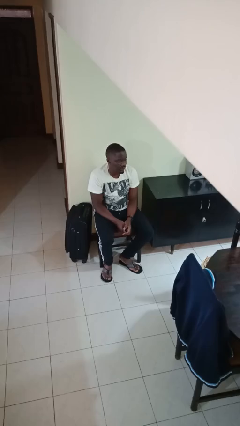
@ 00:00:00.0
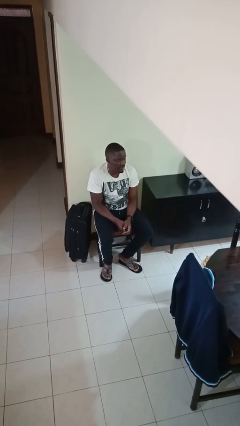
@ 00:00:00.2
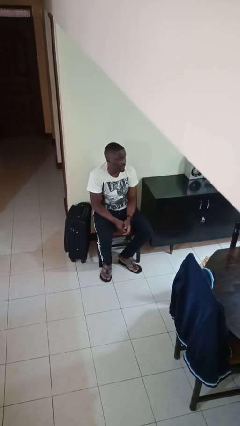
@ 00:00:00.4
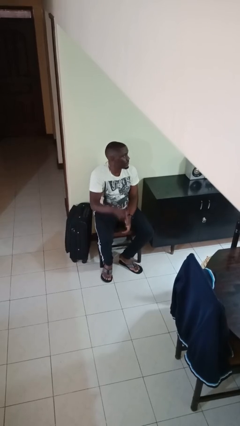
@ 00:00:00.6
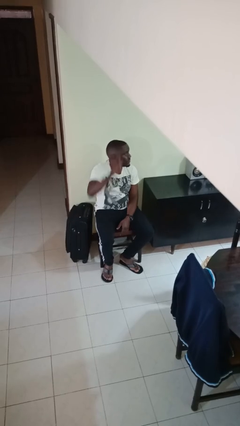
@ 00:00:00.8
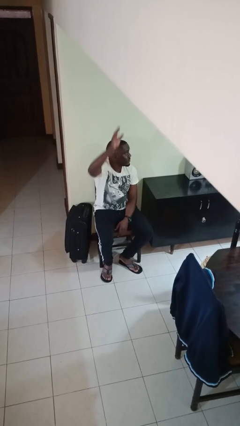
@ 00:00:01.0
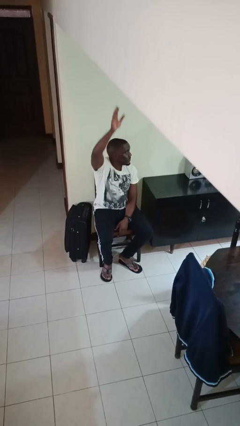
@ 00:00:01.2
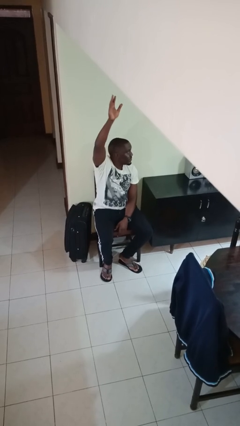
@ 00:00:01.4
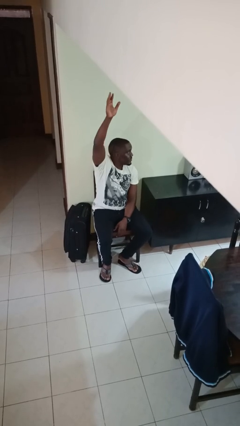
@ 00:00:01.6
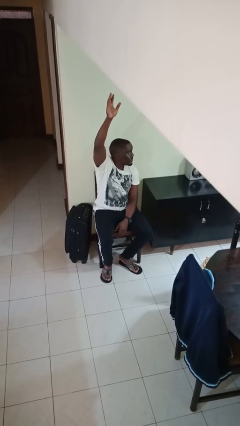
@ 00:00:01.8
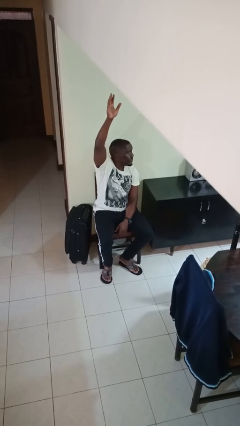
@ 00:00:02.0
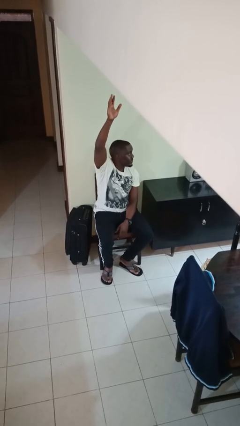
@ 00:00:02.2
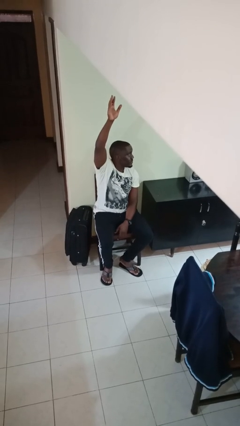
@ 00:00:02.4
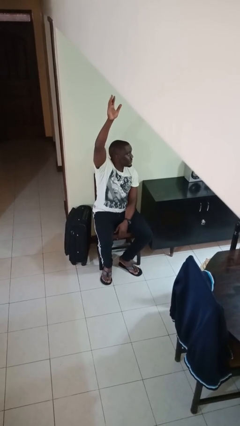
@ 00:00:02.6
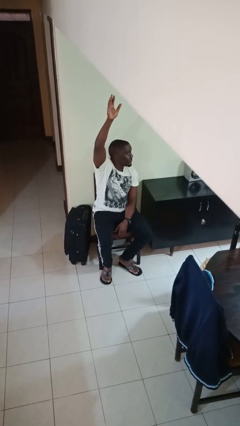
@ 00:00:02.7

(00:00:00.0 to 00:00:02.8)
person gestures raise hand

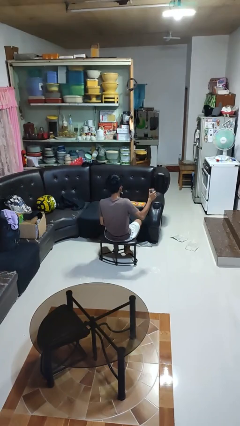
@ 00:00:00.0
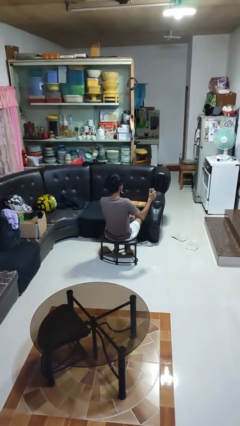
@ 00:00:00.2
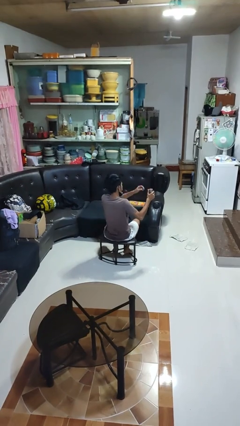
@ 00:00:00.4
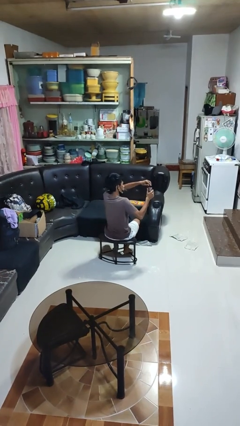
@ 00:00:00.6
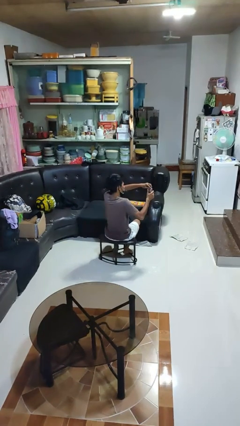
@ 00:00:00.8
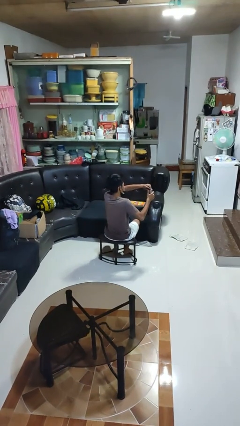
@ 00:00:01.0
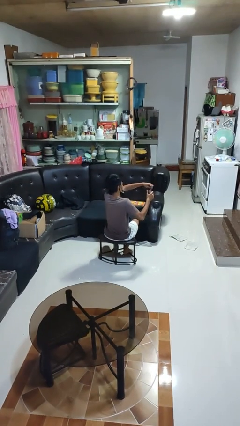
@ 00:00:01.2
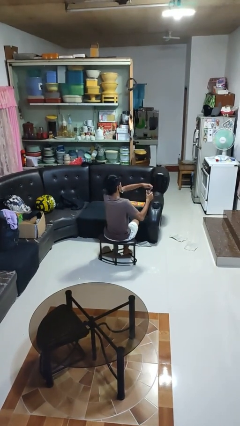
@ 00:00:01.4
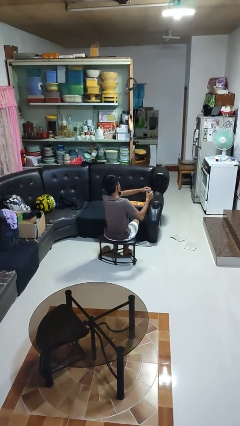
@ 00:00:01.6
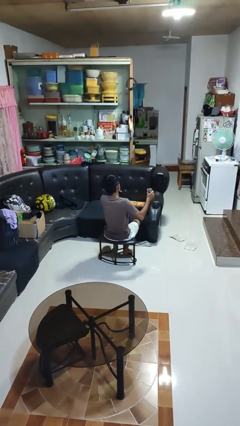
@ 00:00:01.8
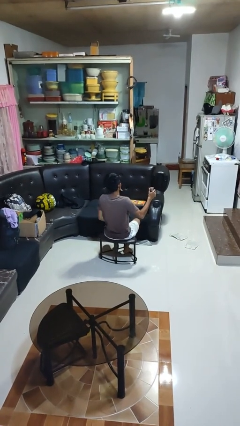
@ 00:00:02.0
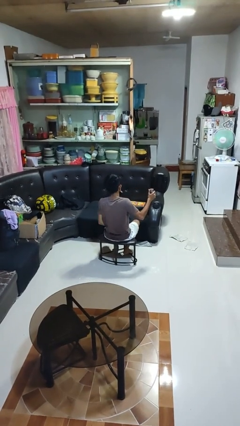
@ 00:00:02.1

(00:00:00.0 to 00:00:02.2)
person opens beverage can

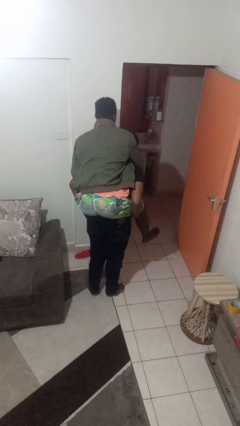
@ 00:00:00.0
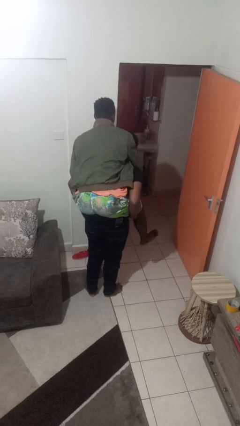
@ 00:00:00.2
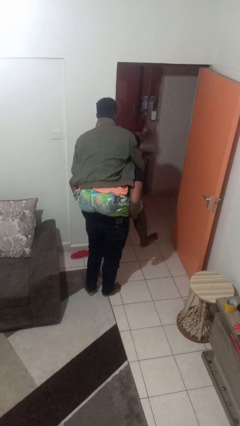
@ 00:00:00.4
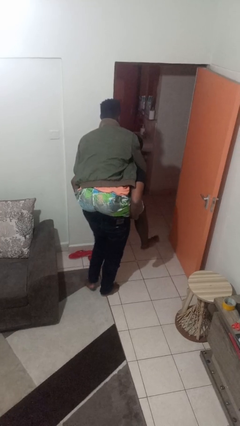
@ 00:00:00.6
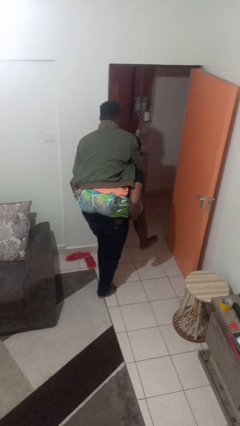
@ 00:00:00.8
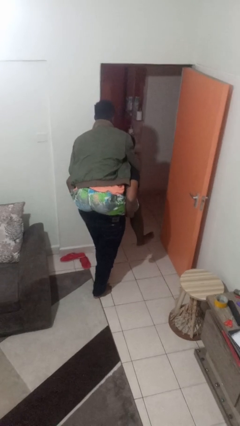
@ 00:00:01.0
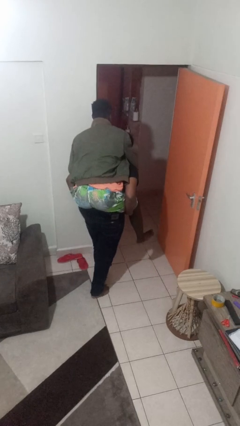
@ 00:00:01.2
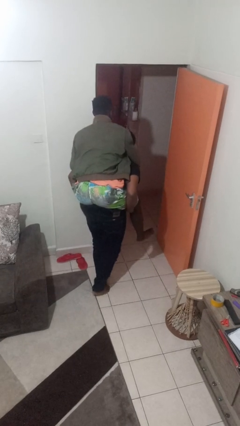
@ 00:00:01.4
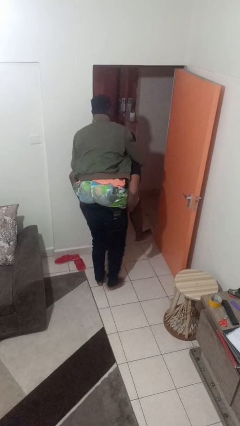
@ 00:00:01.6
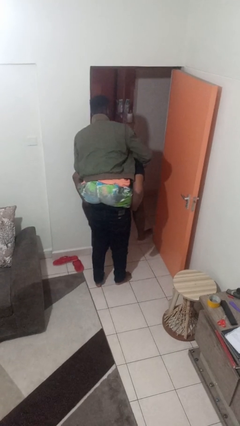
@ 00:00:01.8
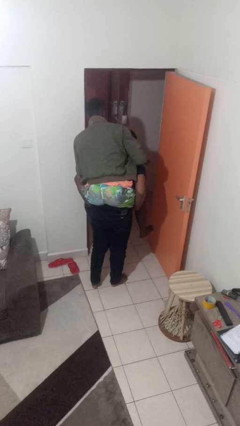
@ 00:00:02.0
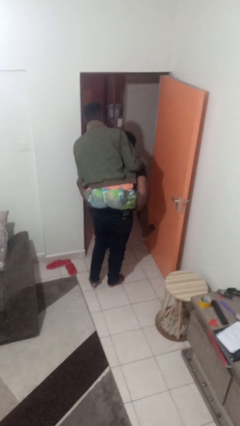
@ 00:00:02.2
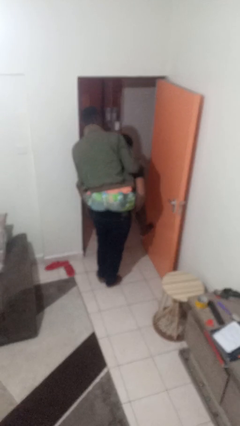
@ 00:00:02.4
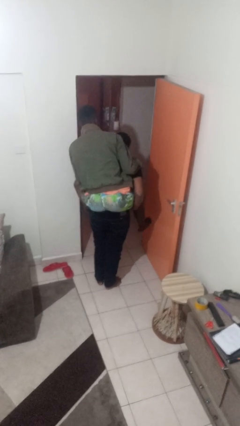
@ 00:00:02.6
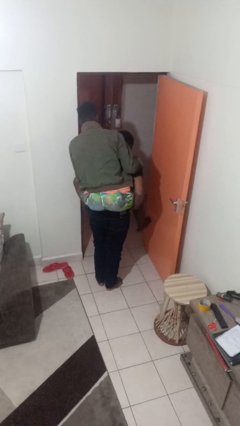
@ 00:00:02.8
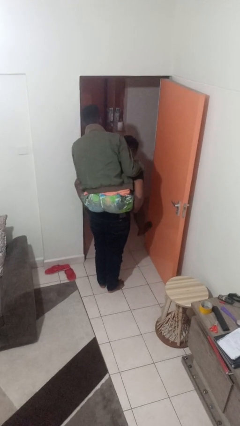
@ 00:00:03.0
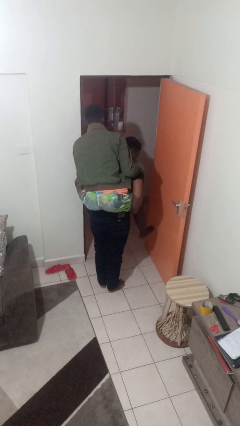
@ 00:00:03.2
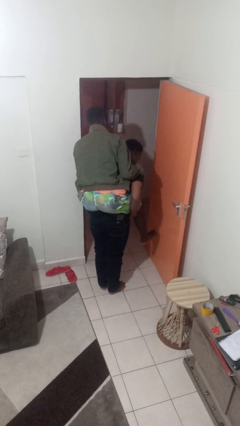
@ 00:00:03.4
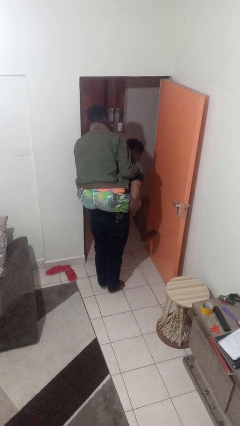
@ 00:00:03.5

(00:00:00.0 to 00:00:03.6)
person carries person on back

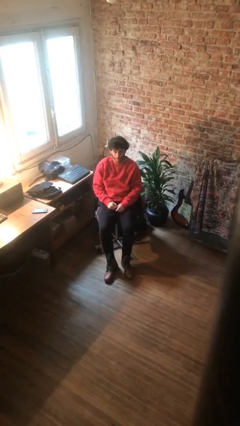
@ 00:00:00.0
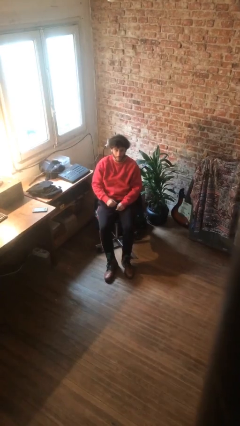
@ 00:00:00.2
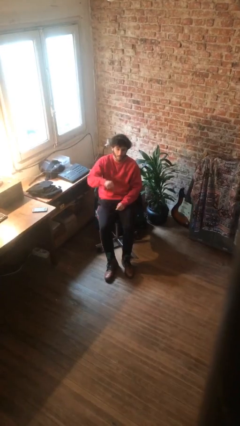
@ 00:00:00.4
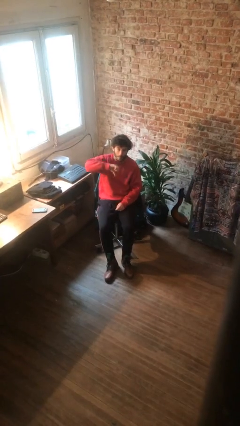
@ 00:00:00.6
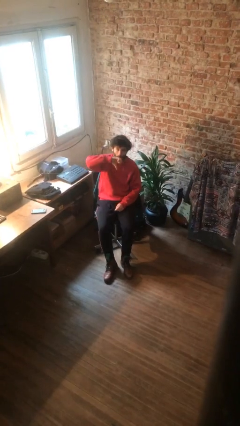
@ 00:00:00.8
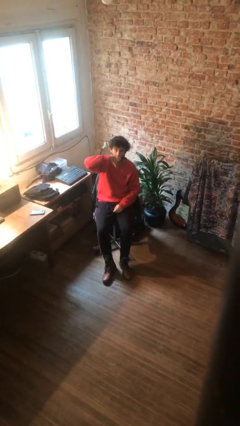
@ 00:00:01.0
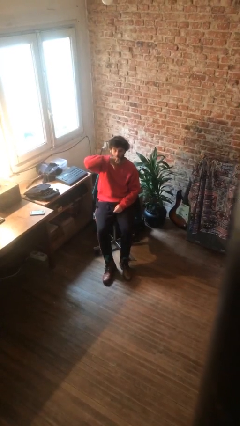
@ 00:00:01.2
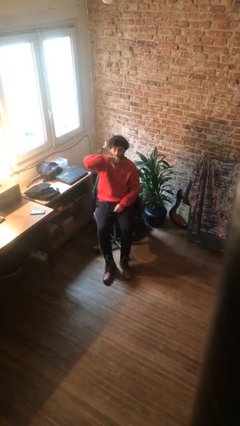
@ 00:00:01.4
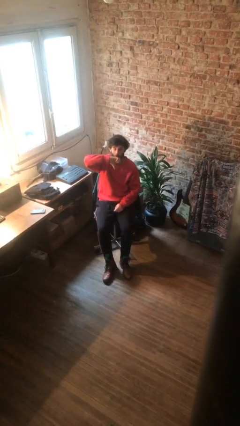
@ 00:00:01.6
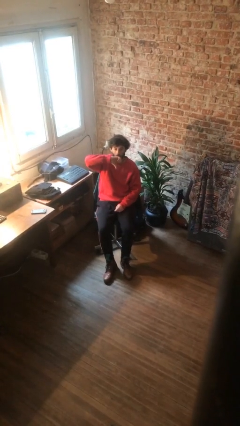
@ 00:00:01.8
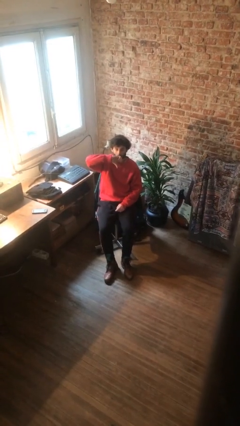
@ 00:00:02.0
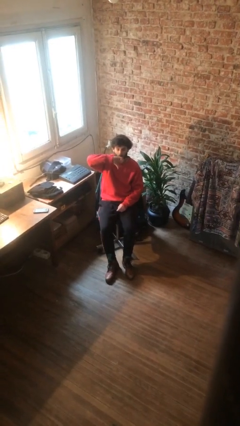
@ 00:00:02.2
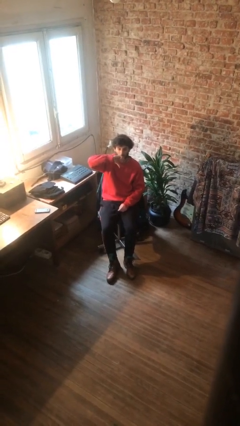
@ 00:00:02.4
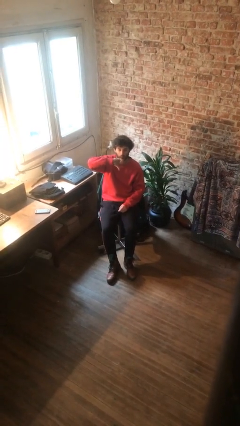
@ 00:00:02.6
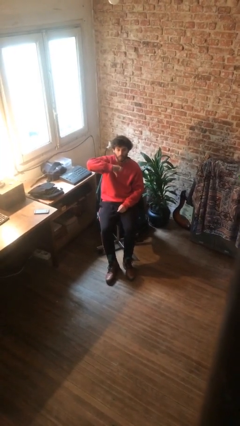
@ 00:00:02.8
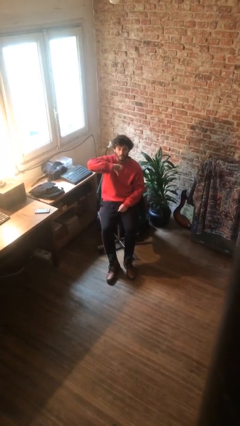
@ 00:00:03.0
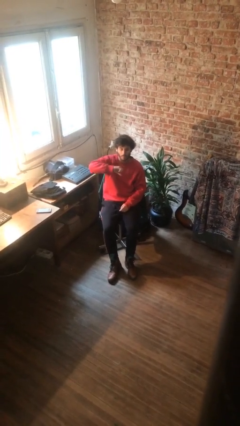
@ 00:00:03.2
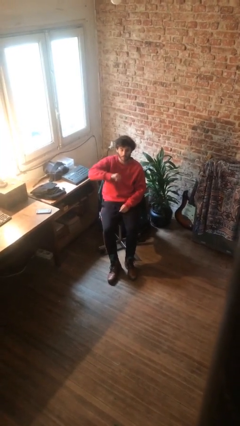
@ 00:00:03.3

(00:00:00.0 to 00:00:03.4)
person gestures thumbs down

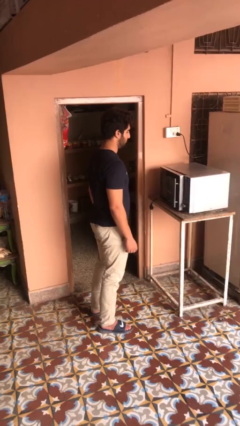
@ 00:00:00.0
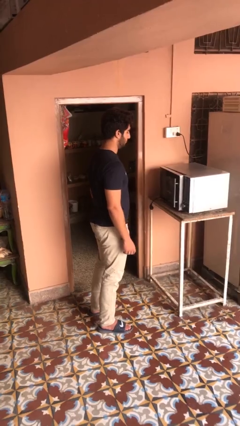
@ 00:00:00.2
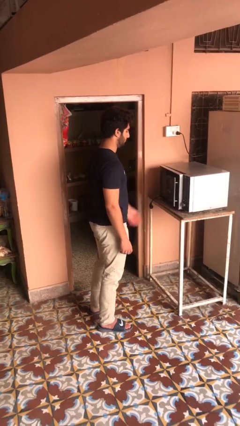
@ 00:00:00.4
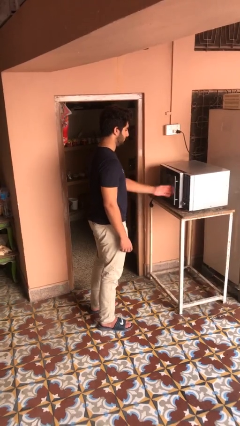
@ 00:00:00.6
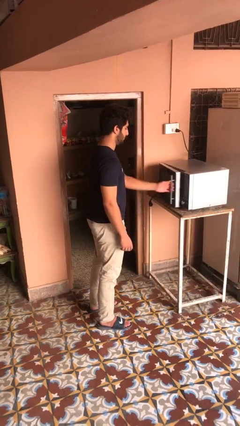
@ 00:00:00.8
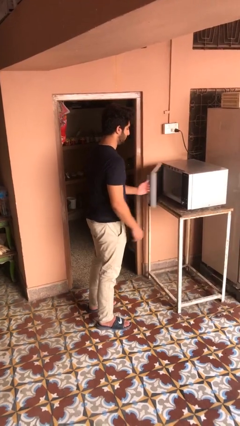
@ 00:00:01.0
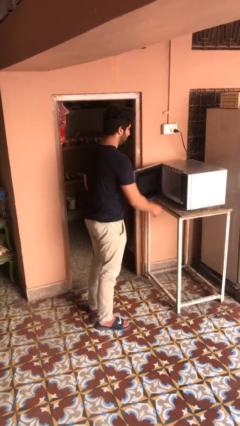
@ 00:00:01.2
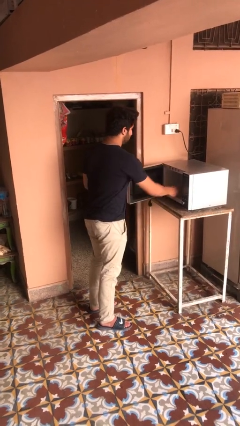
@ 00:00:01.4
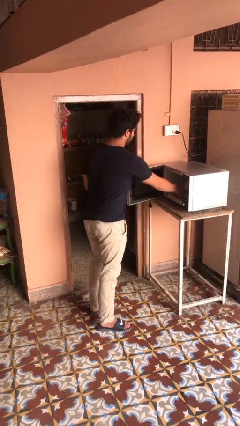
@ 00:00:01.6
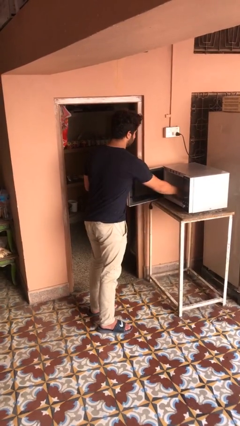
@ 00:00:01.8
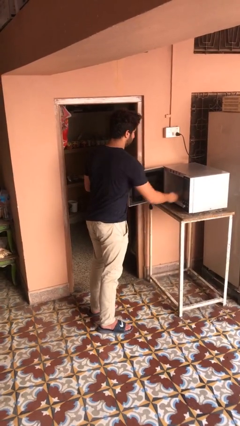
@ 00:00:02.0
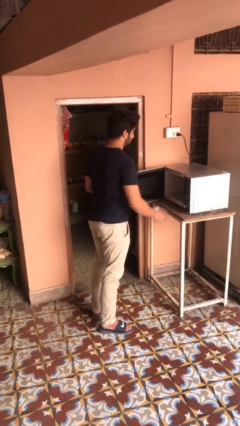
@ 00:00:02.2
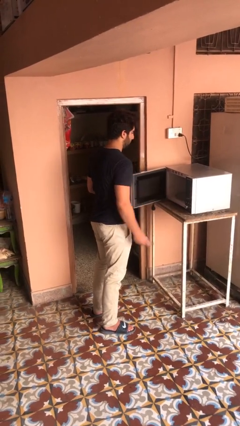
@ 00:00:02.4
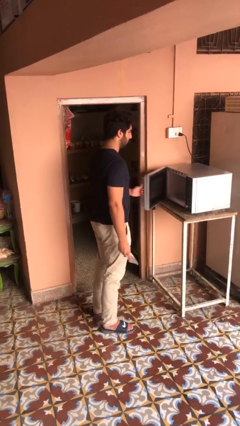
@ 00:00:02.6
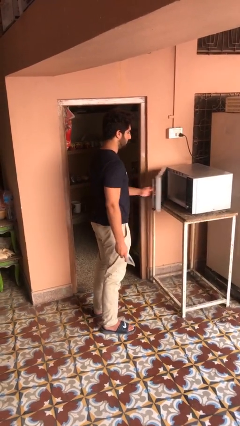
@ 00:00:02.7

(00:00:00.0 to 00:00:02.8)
person takes object from microwave

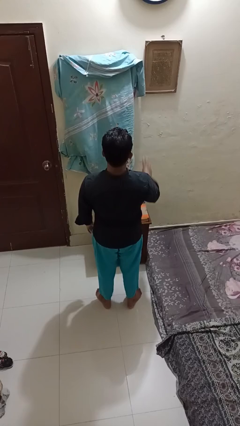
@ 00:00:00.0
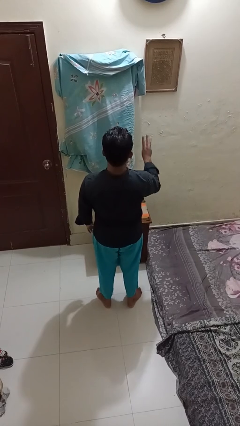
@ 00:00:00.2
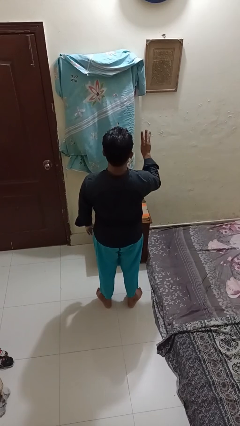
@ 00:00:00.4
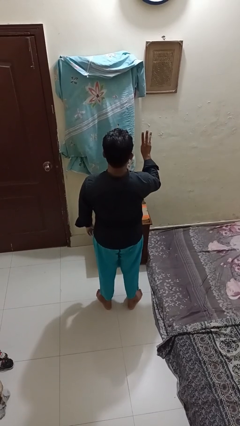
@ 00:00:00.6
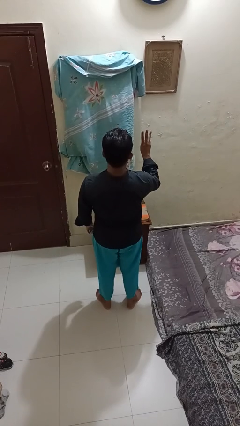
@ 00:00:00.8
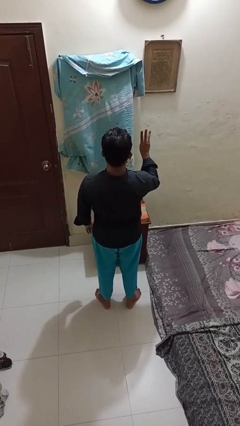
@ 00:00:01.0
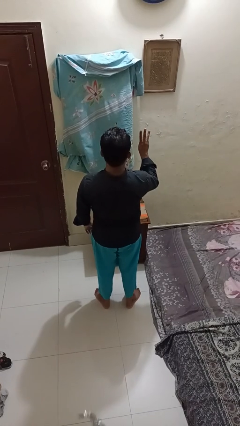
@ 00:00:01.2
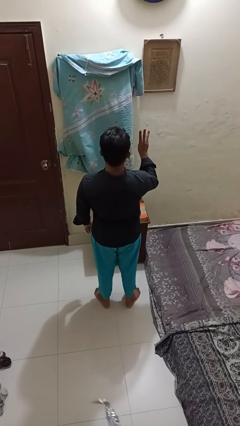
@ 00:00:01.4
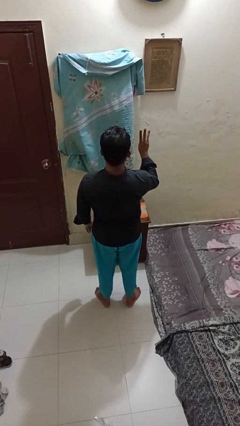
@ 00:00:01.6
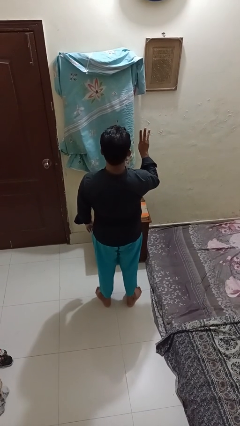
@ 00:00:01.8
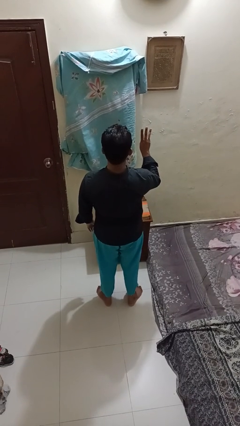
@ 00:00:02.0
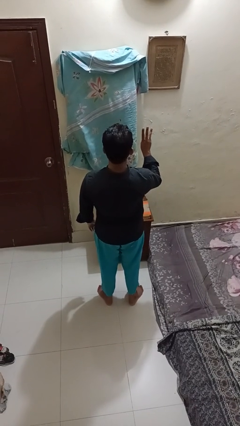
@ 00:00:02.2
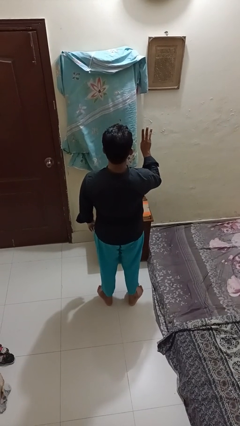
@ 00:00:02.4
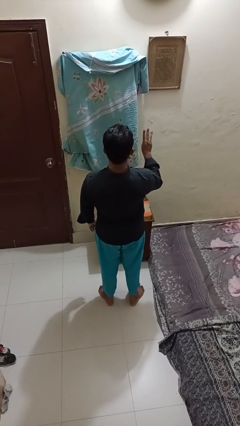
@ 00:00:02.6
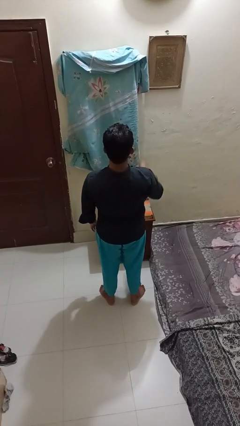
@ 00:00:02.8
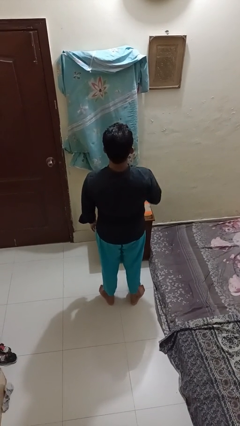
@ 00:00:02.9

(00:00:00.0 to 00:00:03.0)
person gestures number three
